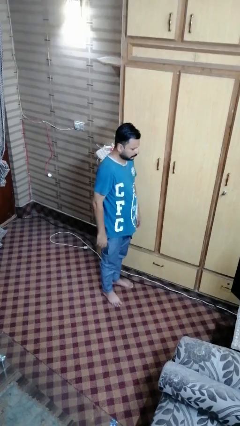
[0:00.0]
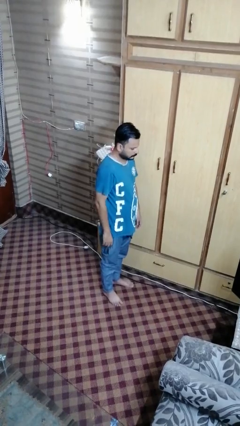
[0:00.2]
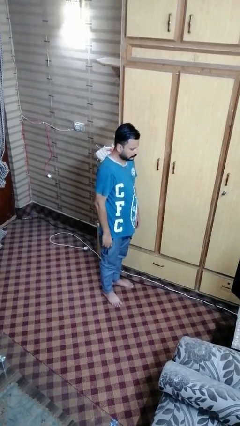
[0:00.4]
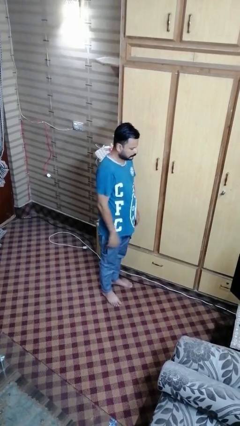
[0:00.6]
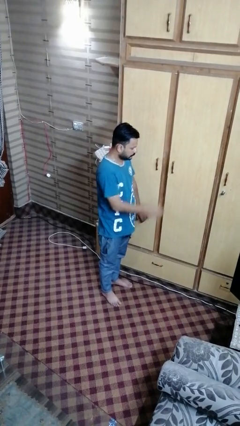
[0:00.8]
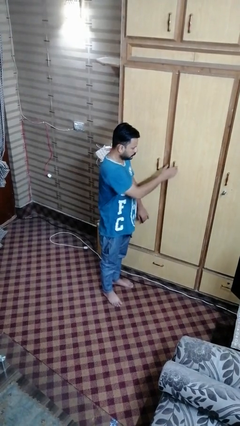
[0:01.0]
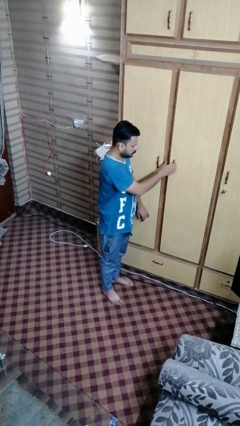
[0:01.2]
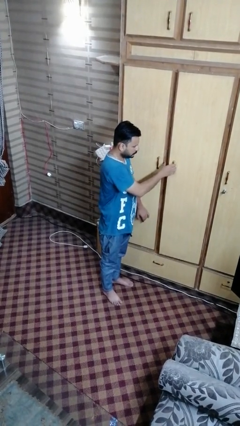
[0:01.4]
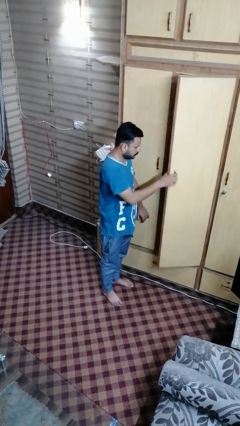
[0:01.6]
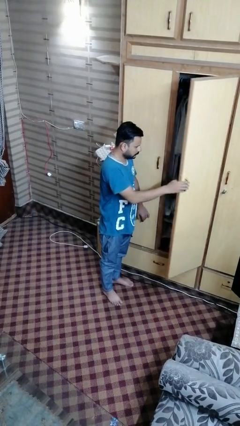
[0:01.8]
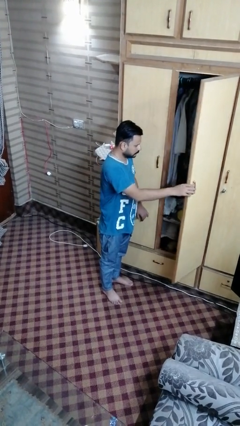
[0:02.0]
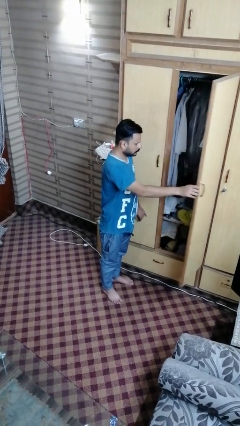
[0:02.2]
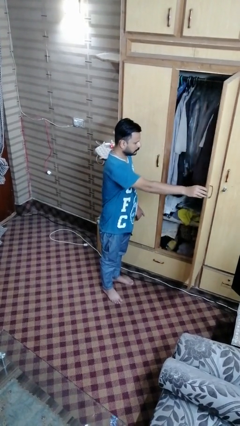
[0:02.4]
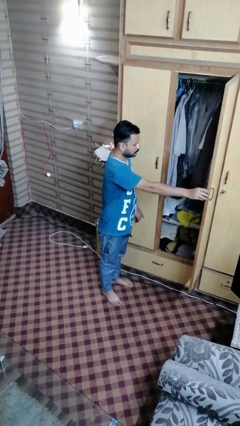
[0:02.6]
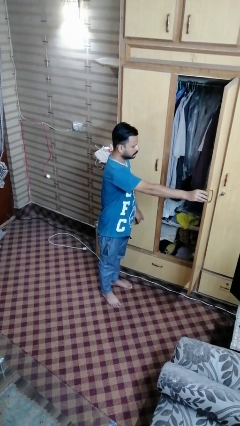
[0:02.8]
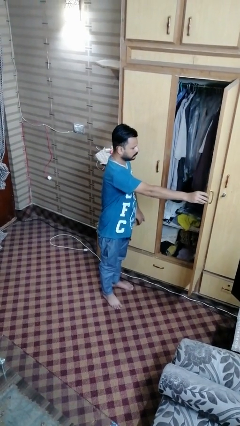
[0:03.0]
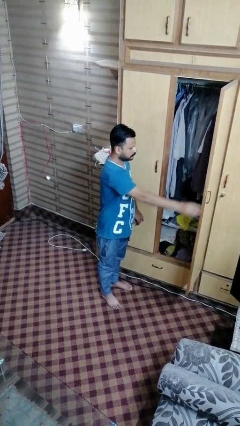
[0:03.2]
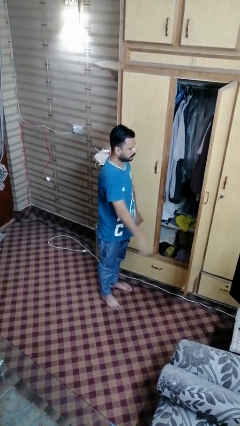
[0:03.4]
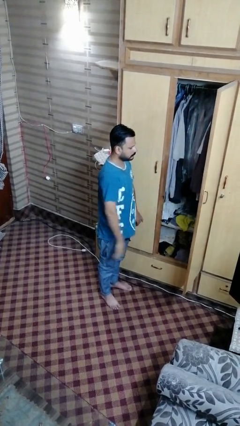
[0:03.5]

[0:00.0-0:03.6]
person opens closet door

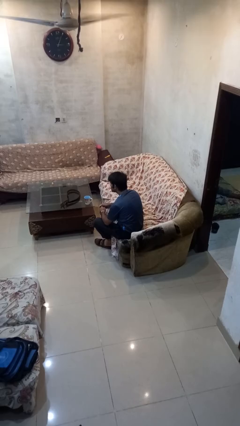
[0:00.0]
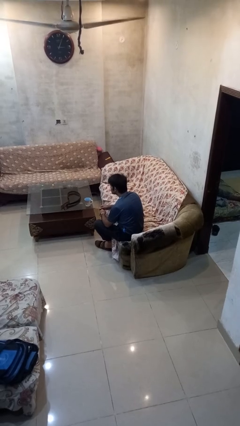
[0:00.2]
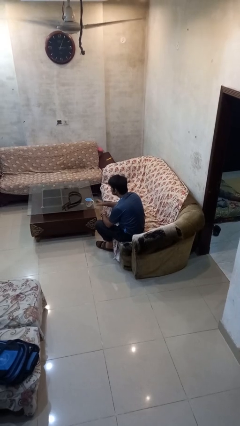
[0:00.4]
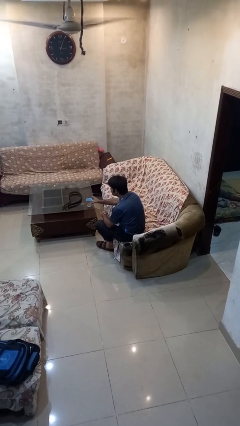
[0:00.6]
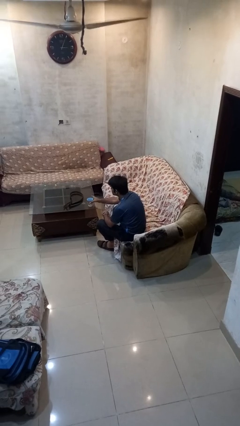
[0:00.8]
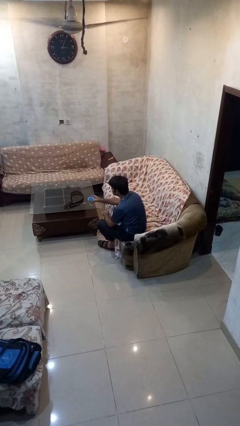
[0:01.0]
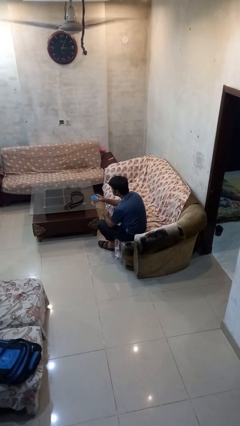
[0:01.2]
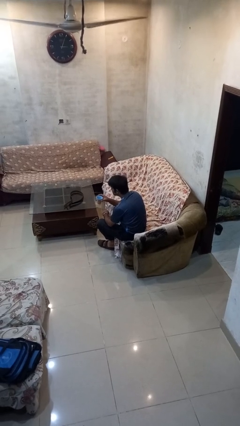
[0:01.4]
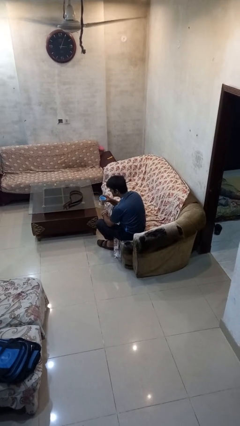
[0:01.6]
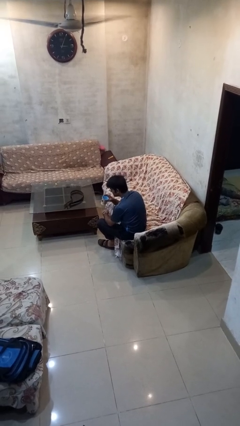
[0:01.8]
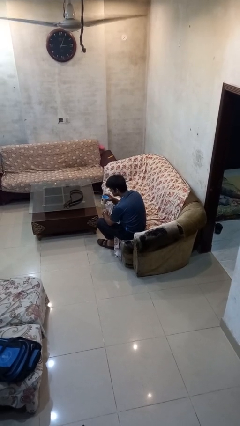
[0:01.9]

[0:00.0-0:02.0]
person picks up object from table

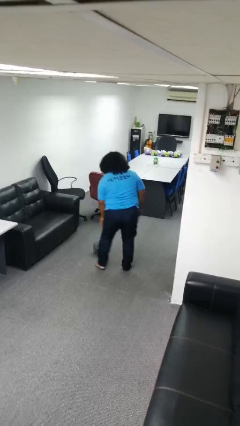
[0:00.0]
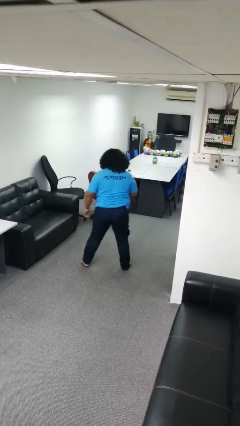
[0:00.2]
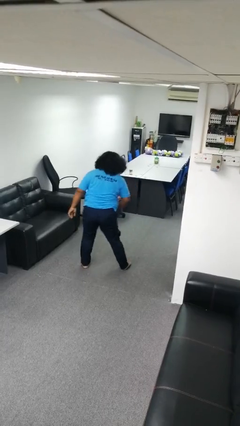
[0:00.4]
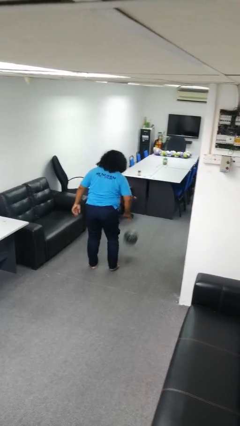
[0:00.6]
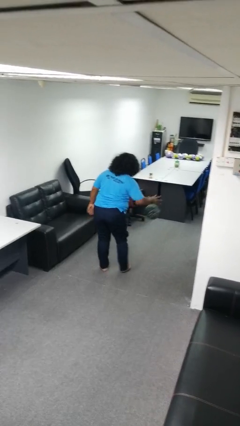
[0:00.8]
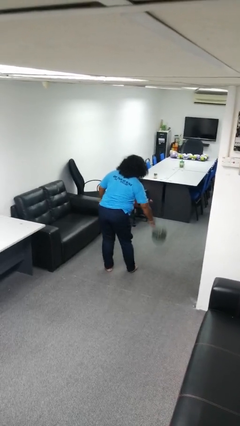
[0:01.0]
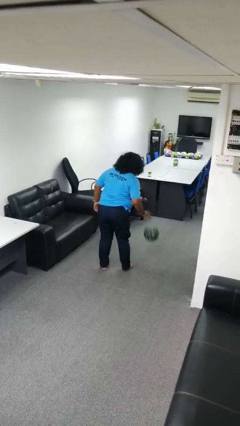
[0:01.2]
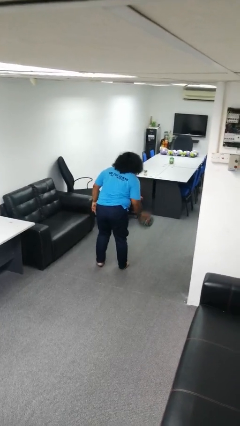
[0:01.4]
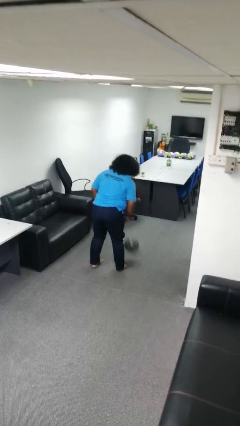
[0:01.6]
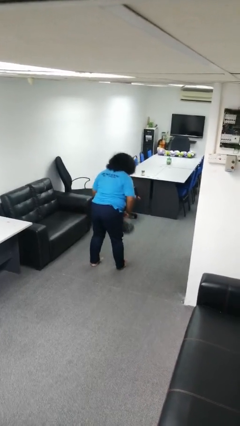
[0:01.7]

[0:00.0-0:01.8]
person bounces ball on floor

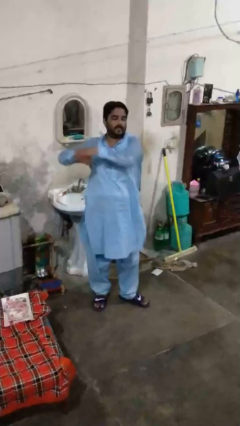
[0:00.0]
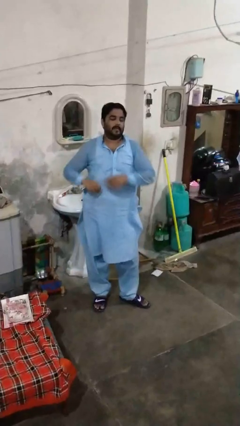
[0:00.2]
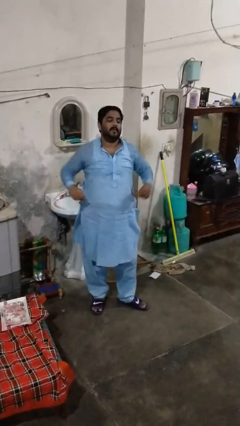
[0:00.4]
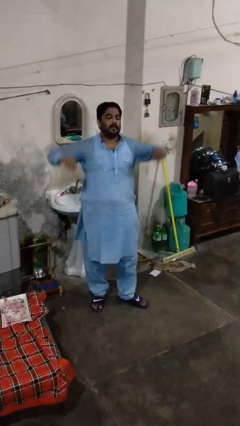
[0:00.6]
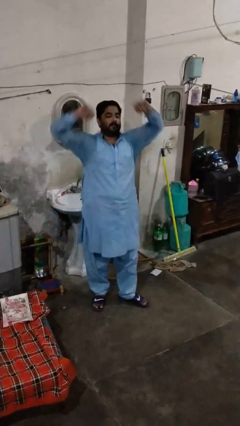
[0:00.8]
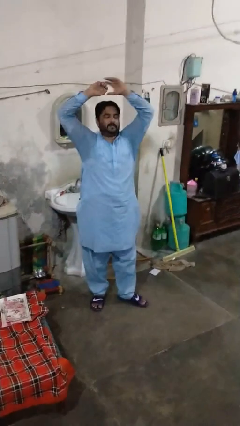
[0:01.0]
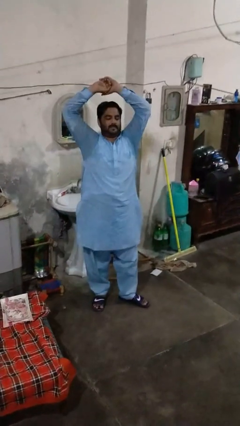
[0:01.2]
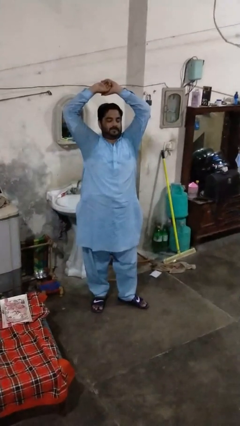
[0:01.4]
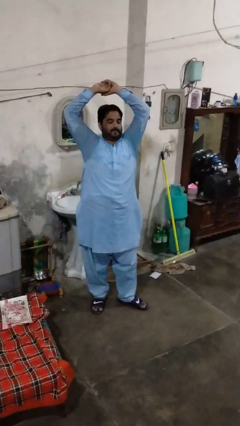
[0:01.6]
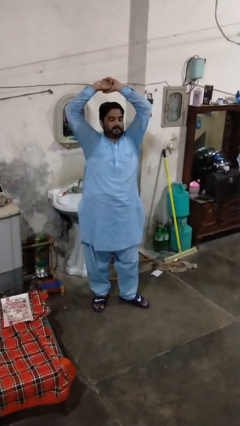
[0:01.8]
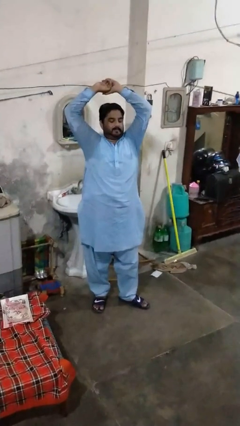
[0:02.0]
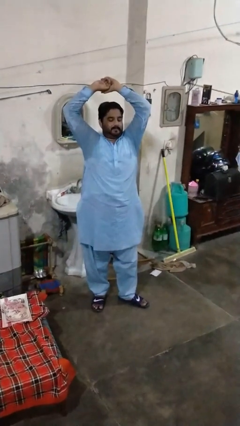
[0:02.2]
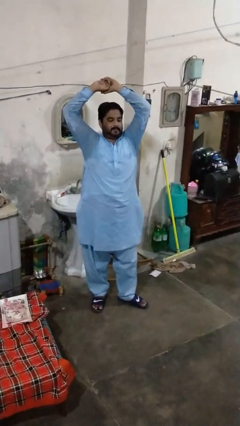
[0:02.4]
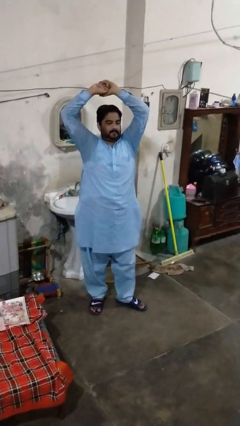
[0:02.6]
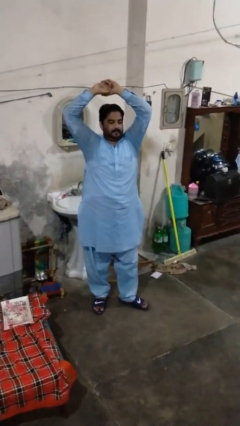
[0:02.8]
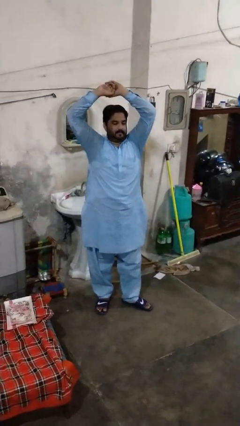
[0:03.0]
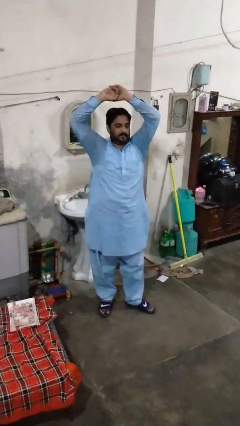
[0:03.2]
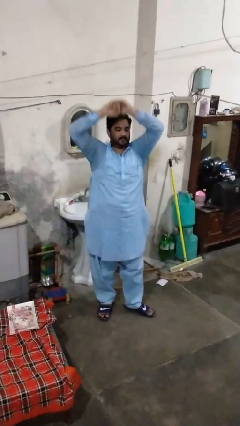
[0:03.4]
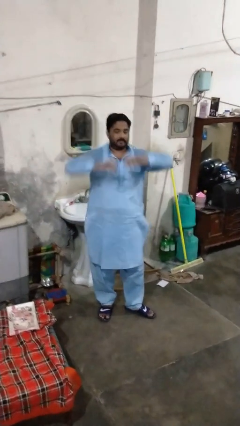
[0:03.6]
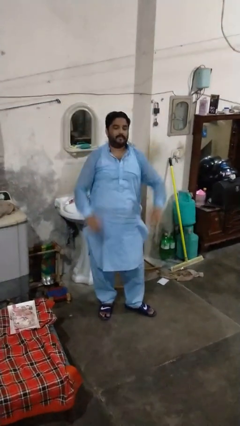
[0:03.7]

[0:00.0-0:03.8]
person stretches arms over head

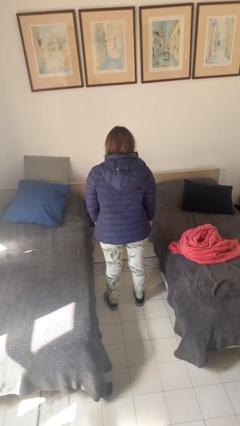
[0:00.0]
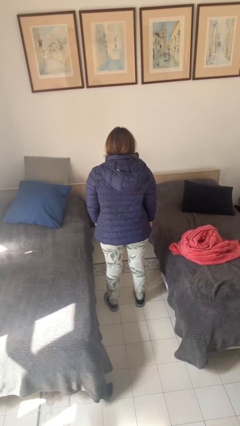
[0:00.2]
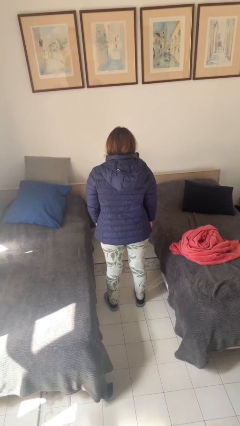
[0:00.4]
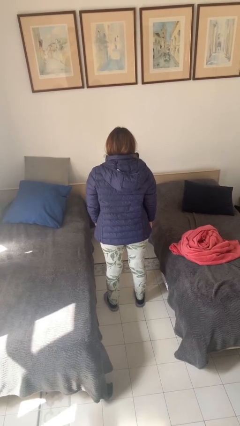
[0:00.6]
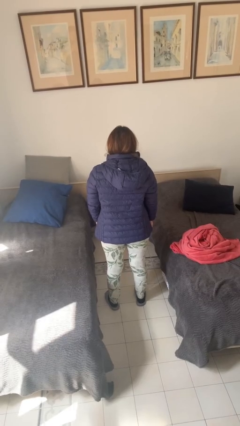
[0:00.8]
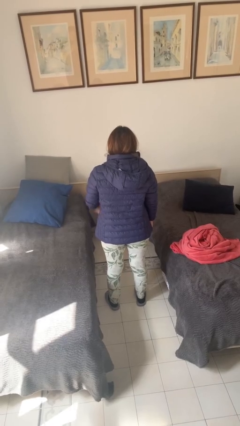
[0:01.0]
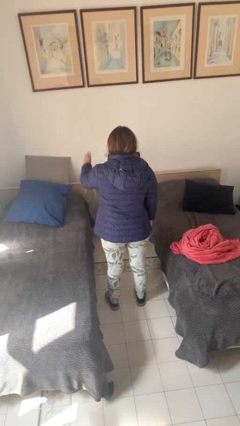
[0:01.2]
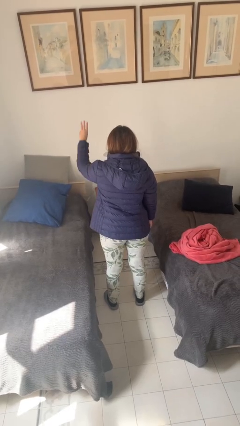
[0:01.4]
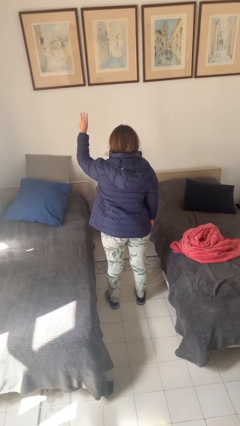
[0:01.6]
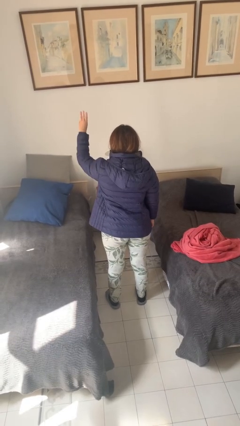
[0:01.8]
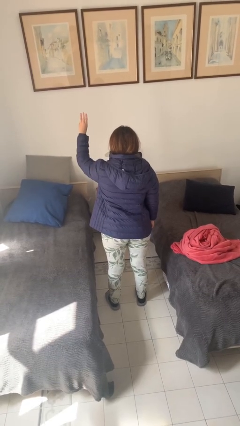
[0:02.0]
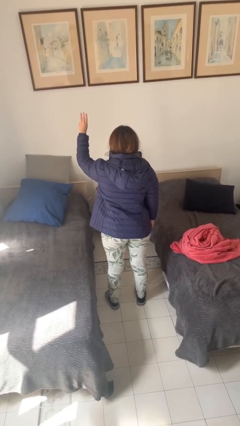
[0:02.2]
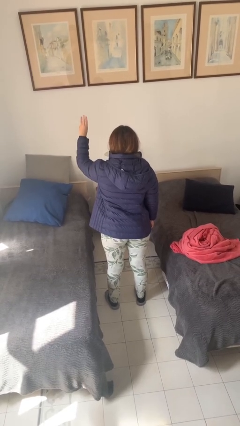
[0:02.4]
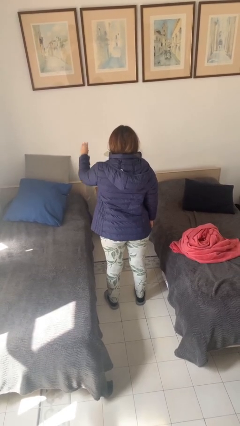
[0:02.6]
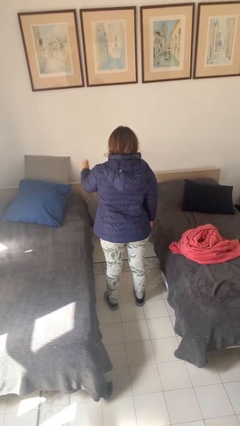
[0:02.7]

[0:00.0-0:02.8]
person gestures number three

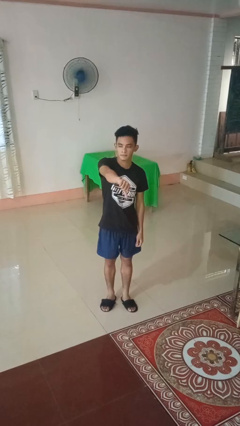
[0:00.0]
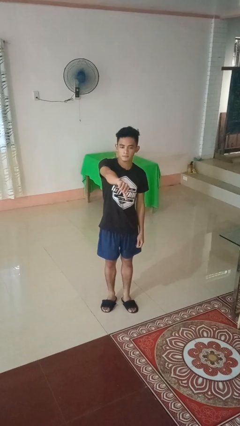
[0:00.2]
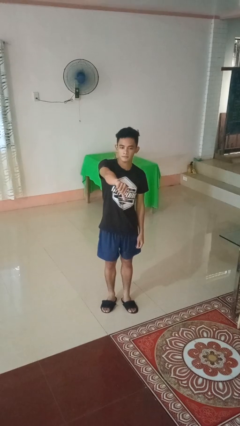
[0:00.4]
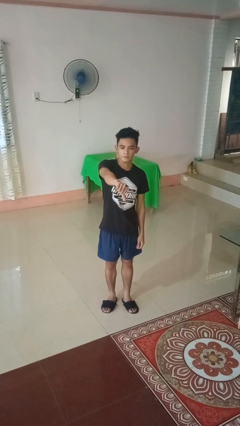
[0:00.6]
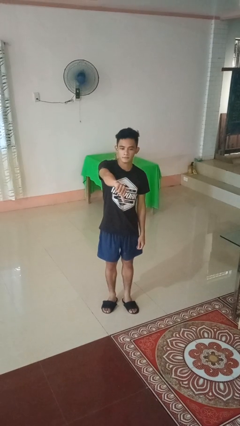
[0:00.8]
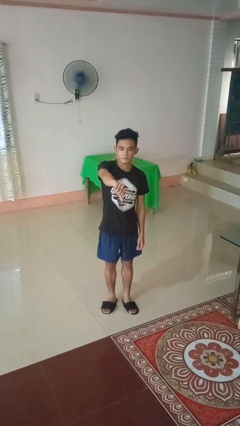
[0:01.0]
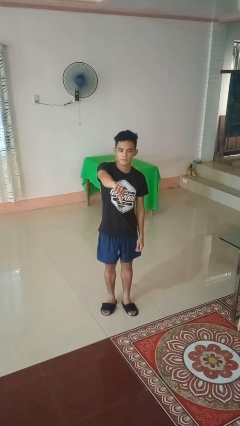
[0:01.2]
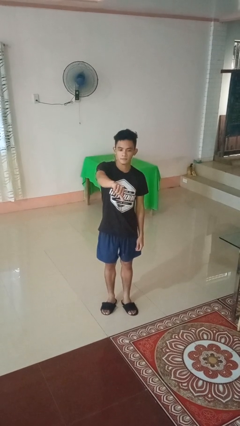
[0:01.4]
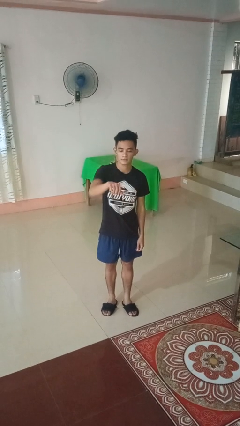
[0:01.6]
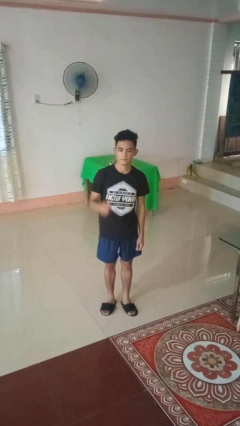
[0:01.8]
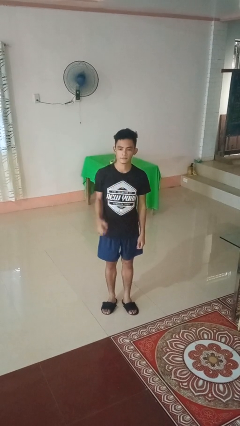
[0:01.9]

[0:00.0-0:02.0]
person gestures thumbs down

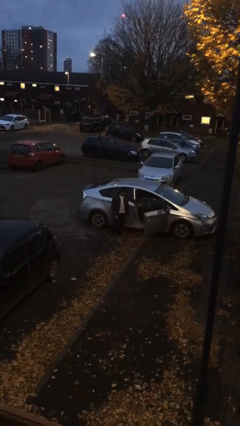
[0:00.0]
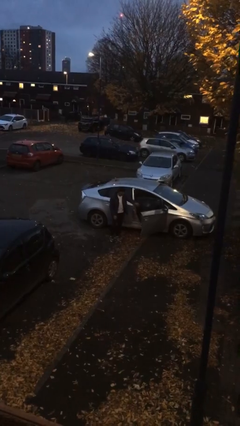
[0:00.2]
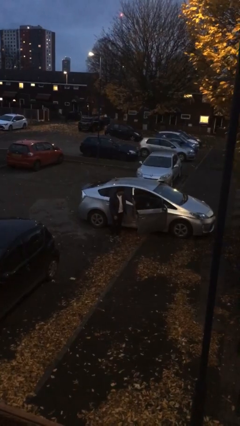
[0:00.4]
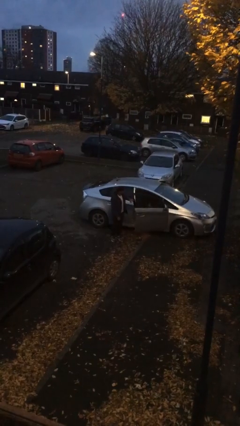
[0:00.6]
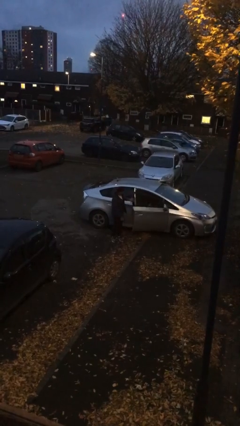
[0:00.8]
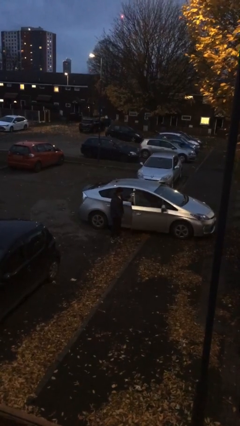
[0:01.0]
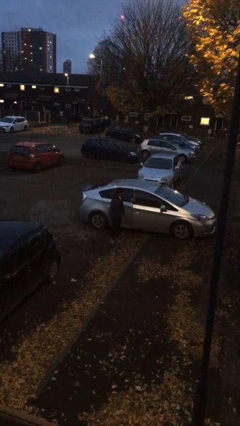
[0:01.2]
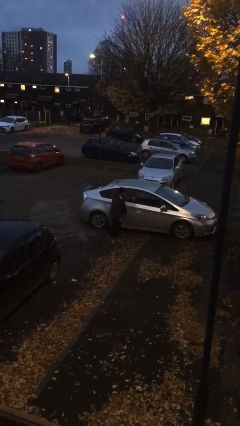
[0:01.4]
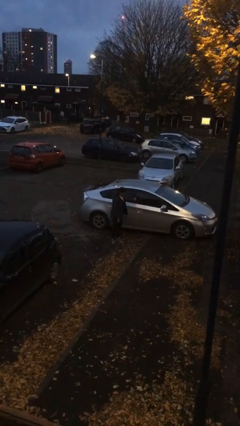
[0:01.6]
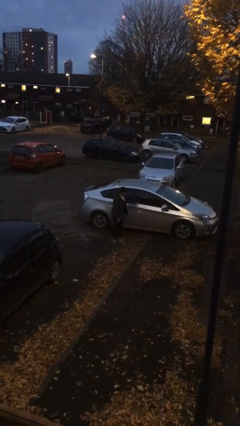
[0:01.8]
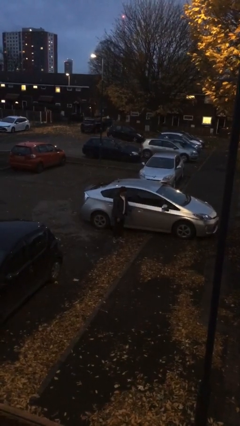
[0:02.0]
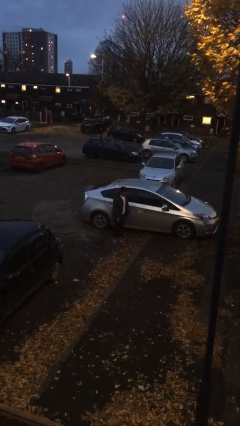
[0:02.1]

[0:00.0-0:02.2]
person closes car door
